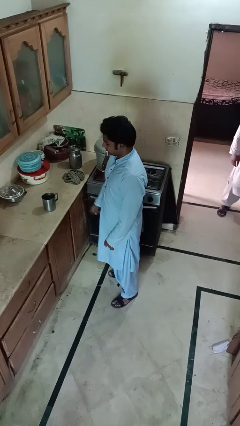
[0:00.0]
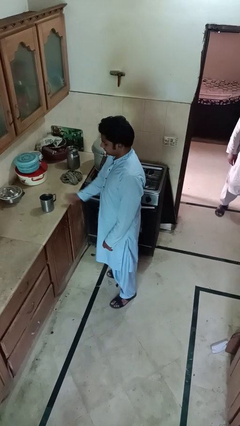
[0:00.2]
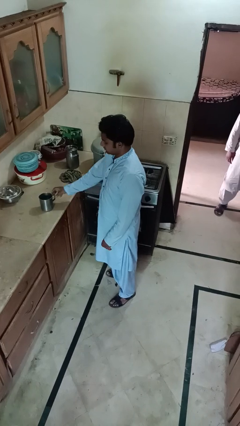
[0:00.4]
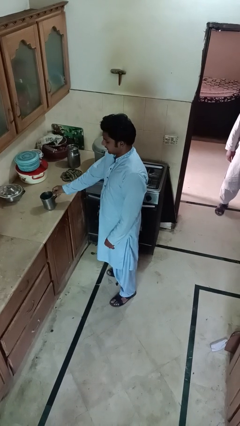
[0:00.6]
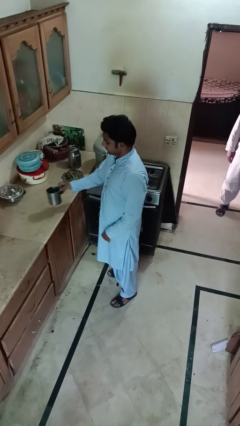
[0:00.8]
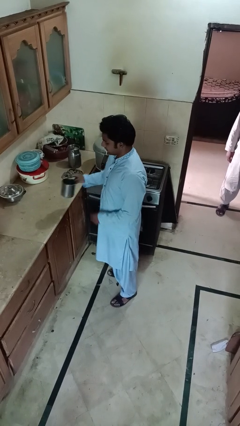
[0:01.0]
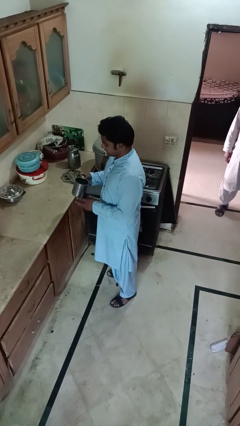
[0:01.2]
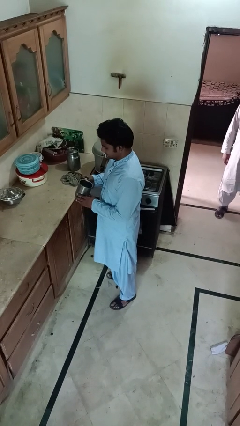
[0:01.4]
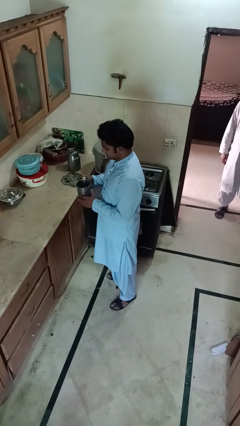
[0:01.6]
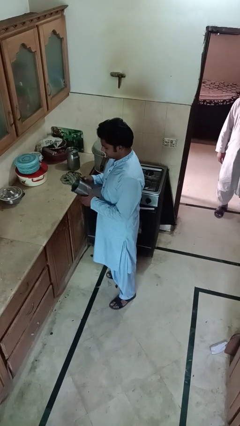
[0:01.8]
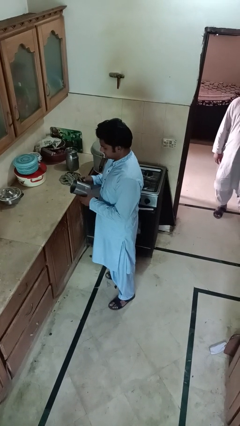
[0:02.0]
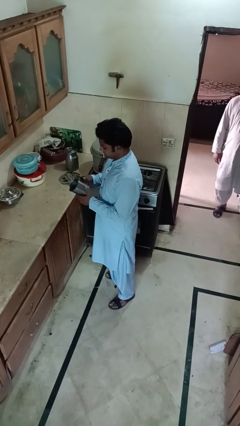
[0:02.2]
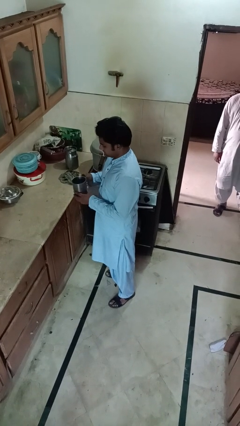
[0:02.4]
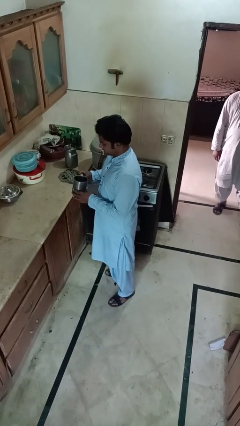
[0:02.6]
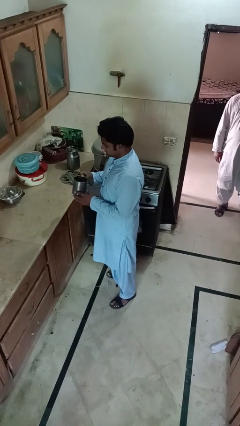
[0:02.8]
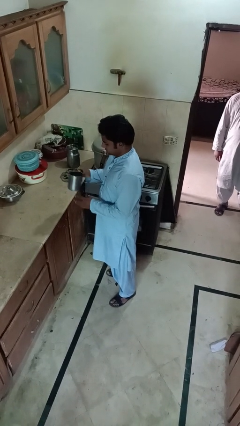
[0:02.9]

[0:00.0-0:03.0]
person picks up object from countertop

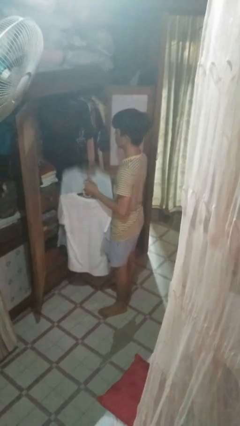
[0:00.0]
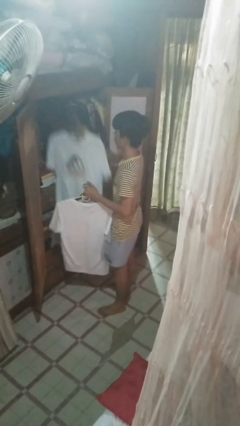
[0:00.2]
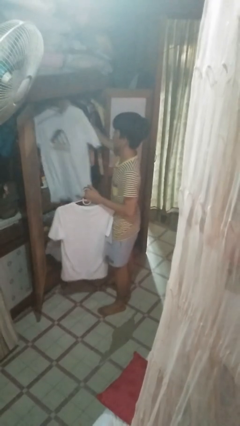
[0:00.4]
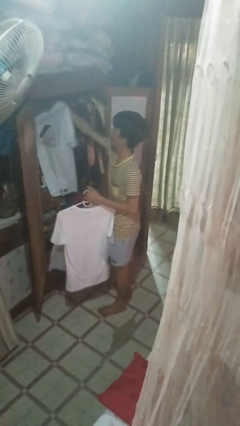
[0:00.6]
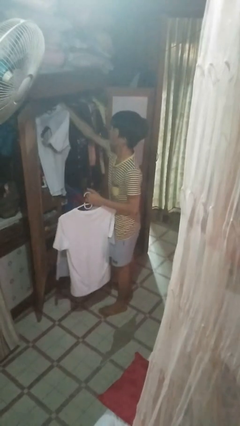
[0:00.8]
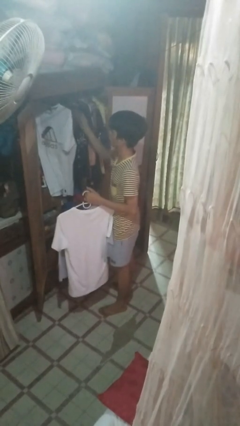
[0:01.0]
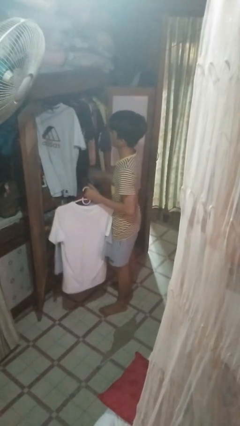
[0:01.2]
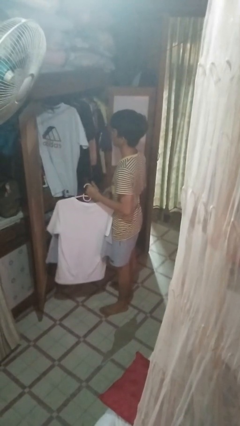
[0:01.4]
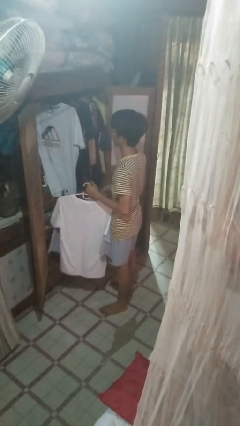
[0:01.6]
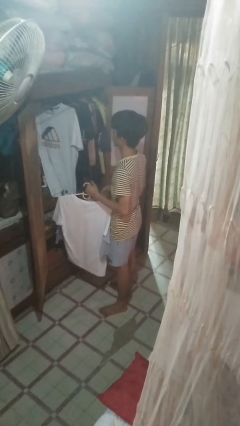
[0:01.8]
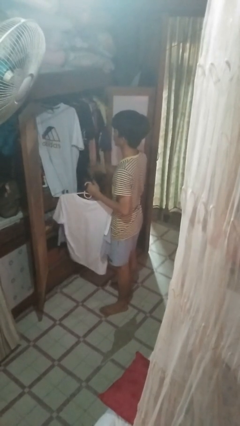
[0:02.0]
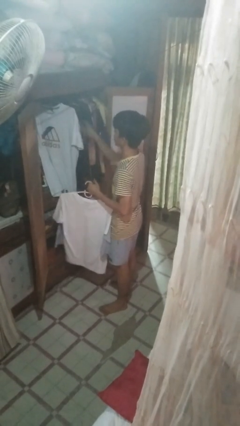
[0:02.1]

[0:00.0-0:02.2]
person puts clothes into closet

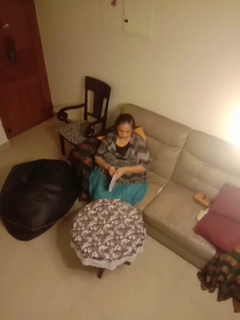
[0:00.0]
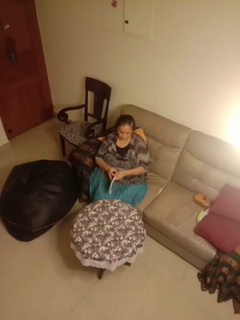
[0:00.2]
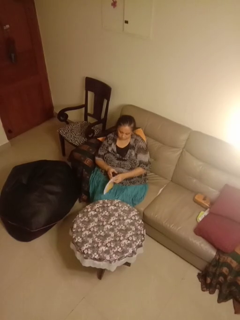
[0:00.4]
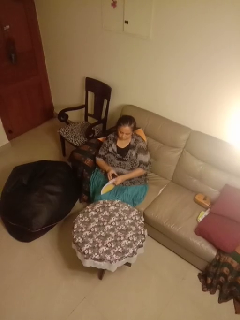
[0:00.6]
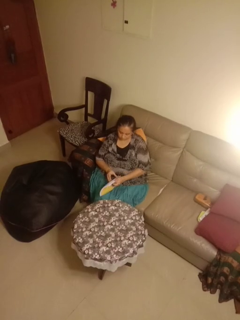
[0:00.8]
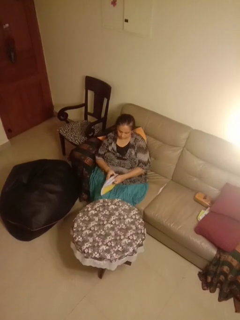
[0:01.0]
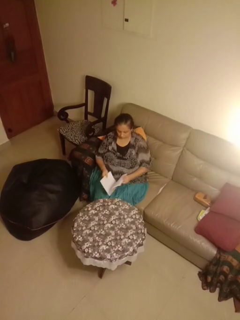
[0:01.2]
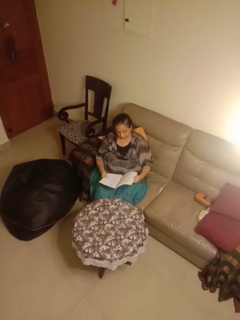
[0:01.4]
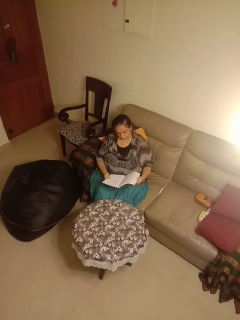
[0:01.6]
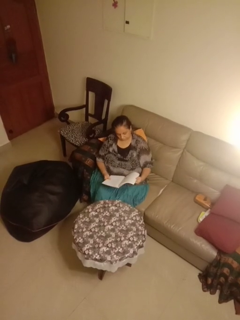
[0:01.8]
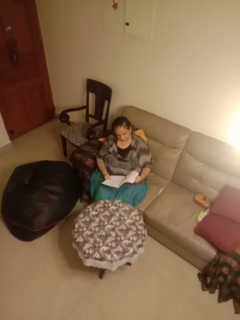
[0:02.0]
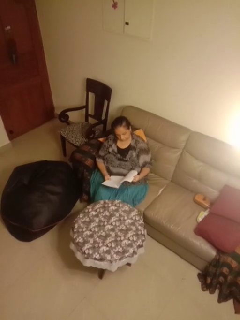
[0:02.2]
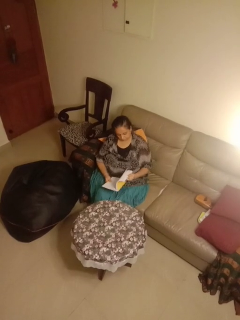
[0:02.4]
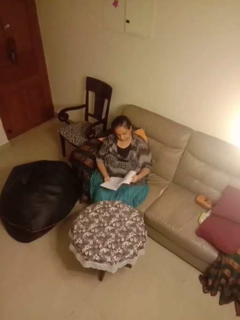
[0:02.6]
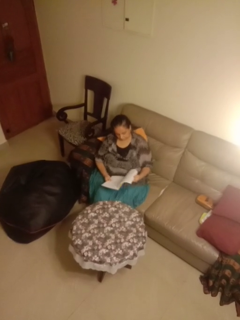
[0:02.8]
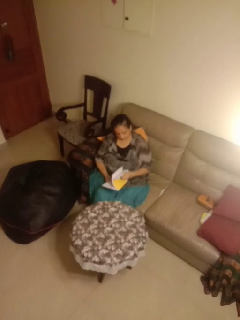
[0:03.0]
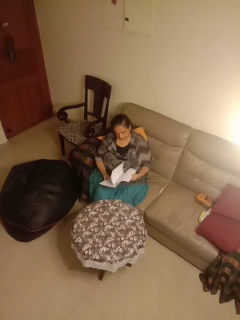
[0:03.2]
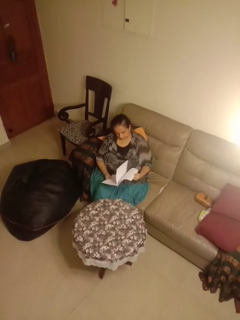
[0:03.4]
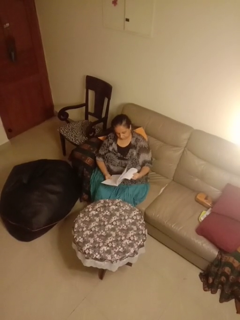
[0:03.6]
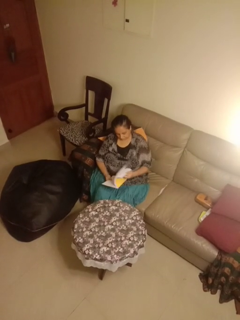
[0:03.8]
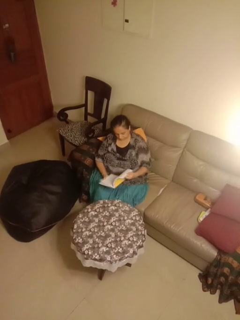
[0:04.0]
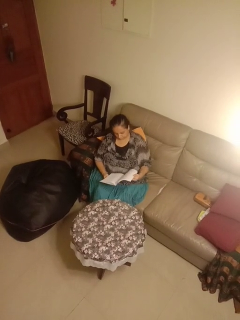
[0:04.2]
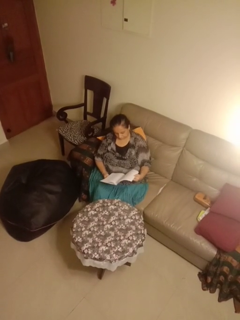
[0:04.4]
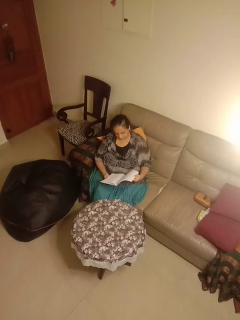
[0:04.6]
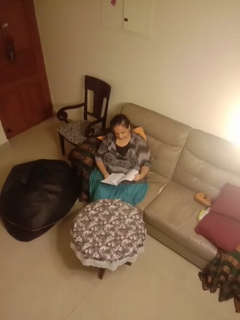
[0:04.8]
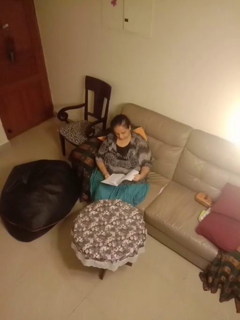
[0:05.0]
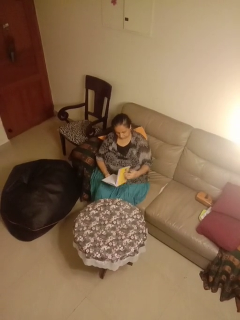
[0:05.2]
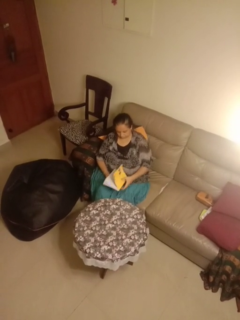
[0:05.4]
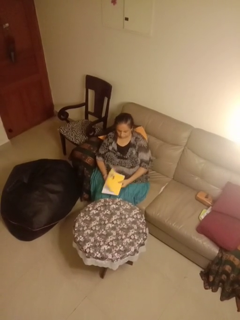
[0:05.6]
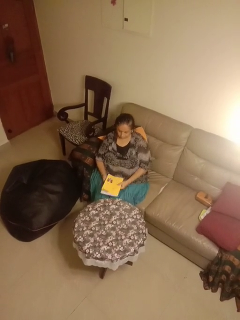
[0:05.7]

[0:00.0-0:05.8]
person reads magazine

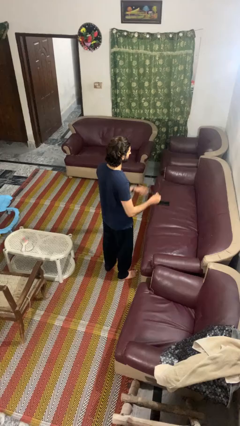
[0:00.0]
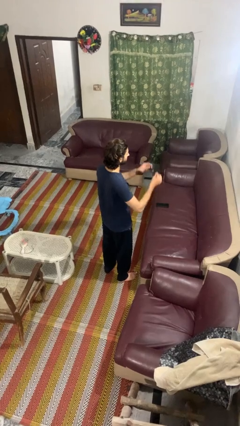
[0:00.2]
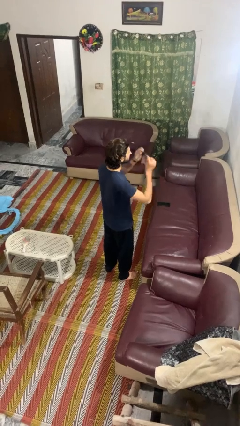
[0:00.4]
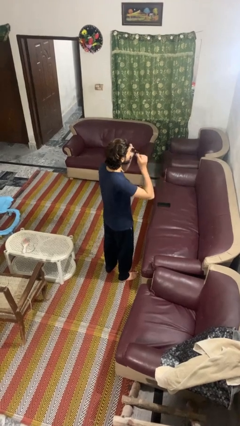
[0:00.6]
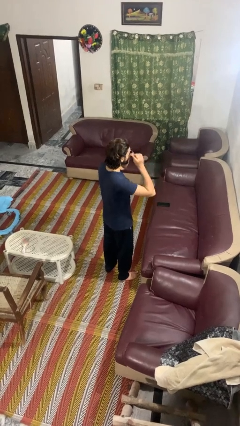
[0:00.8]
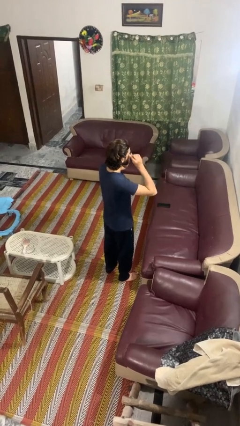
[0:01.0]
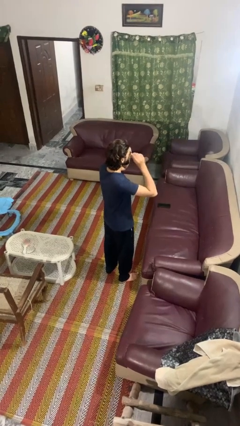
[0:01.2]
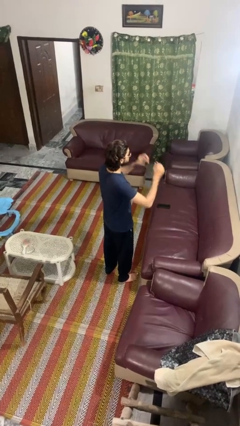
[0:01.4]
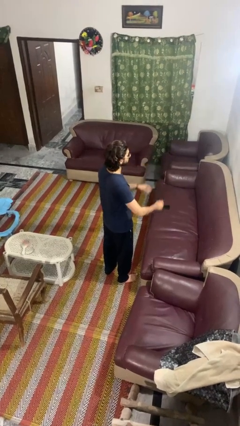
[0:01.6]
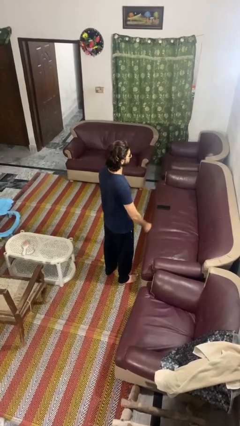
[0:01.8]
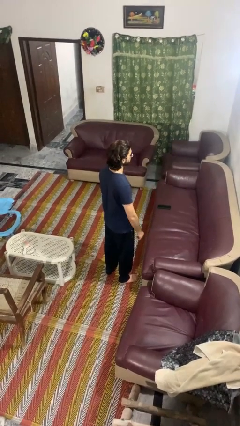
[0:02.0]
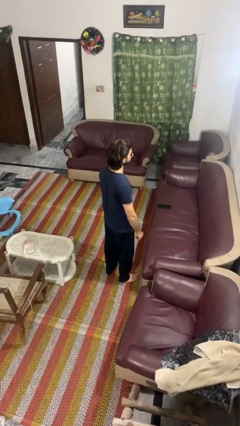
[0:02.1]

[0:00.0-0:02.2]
person puts on sunglasses

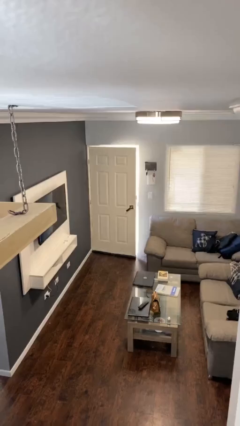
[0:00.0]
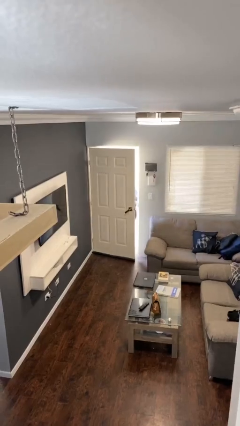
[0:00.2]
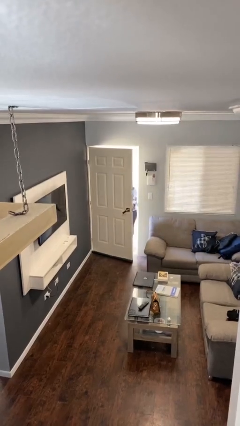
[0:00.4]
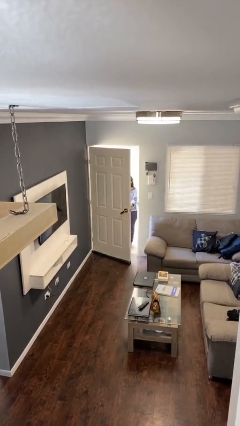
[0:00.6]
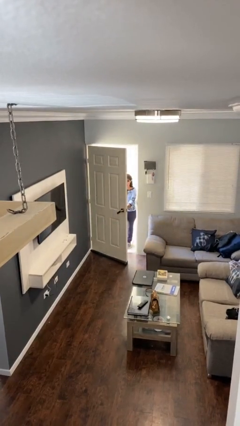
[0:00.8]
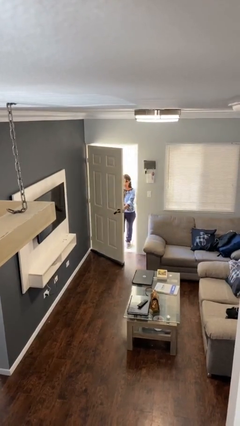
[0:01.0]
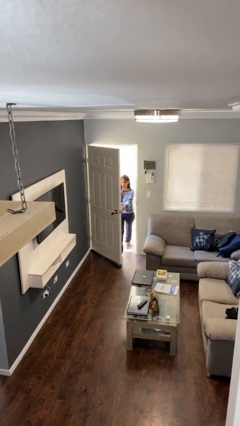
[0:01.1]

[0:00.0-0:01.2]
person opens facility door

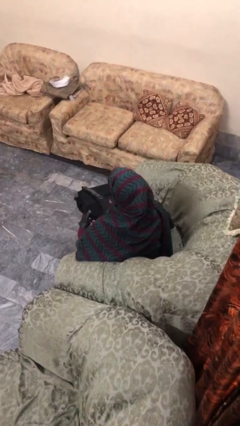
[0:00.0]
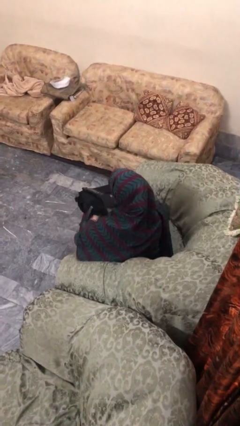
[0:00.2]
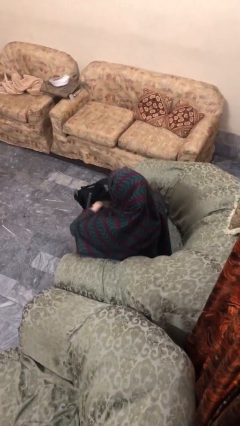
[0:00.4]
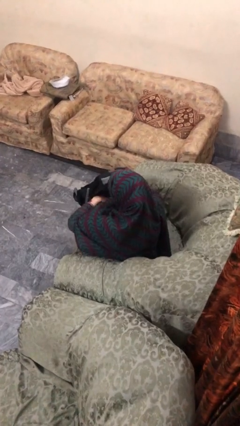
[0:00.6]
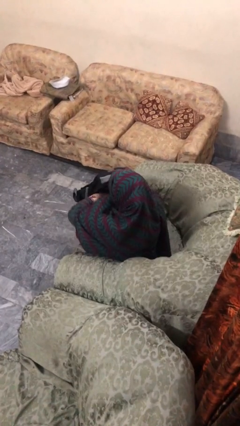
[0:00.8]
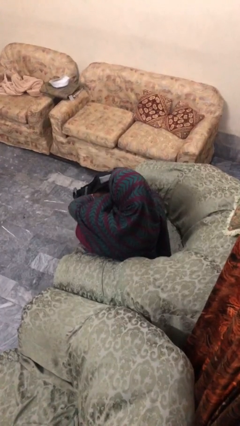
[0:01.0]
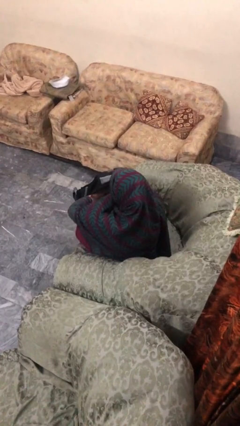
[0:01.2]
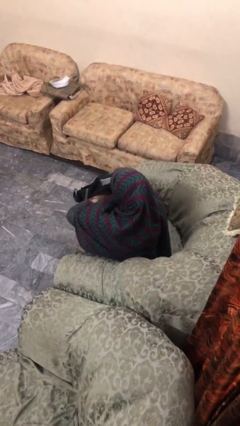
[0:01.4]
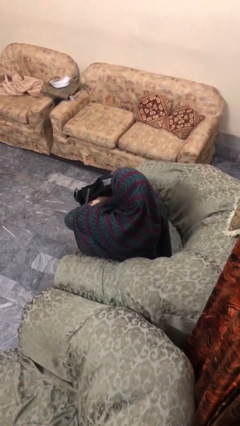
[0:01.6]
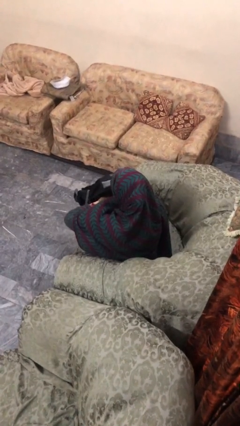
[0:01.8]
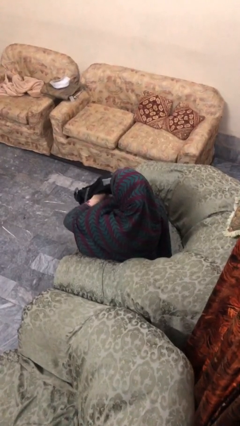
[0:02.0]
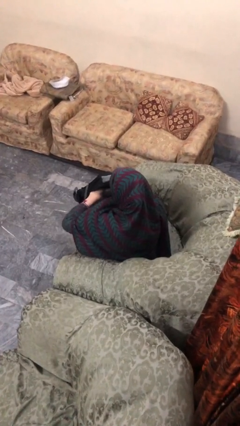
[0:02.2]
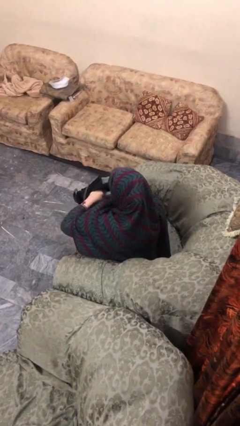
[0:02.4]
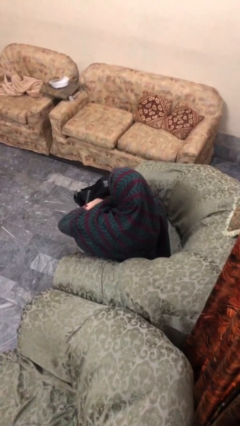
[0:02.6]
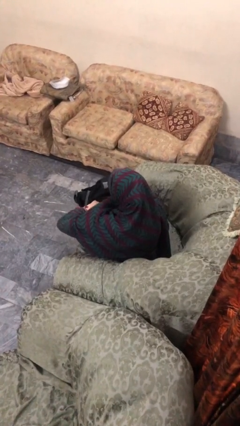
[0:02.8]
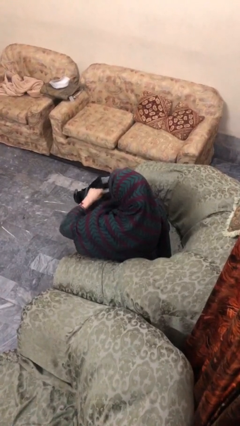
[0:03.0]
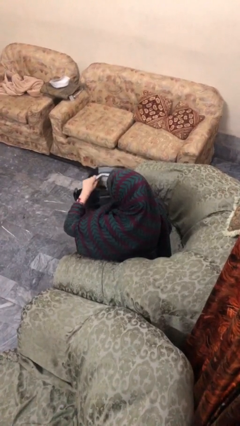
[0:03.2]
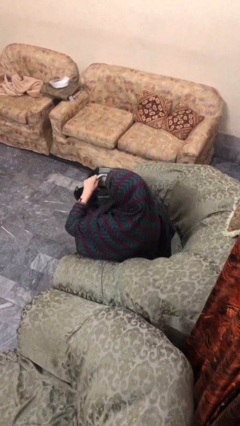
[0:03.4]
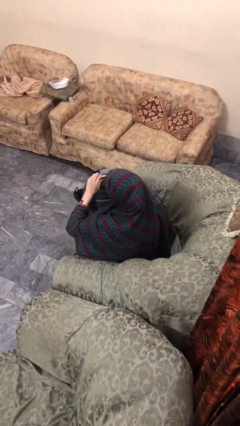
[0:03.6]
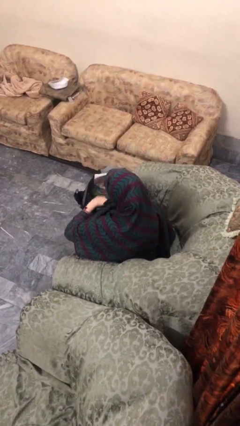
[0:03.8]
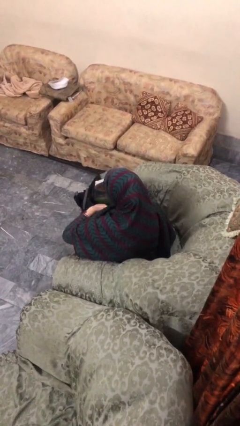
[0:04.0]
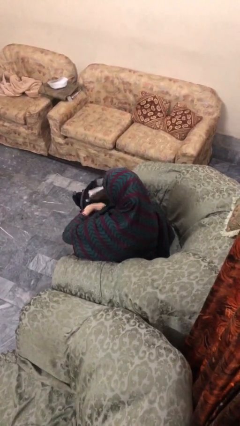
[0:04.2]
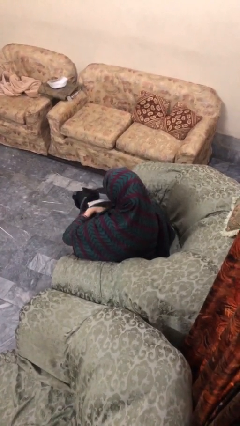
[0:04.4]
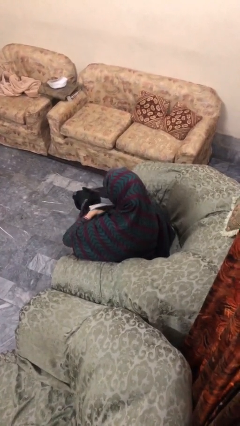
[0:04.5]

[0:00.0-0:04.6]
person searches in bag
